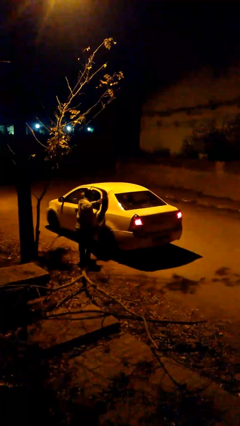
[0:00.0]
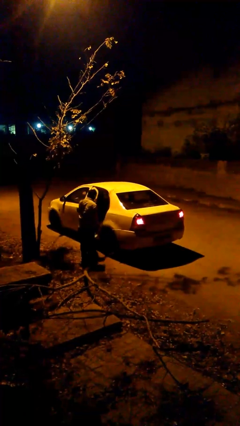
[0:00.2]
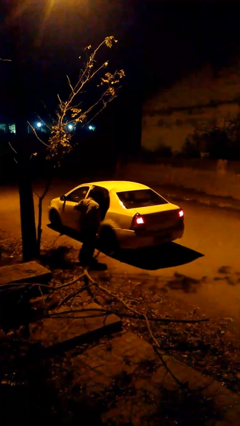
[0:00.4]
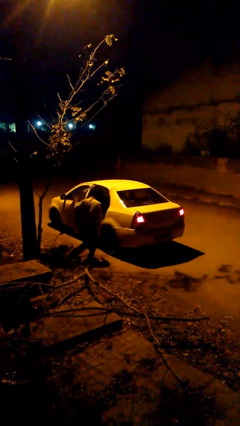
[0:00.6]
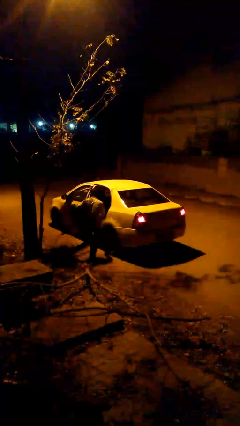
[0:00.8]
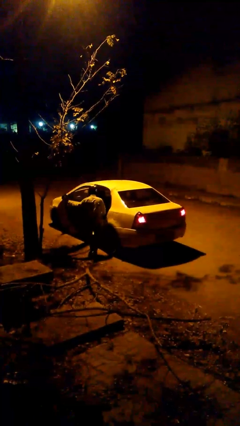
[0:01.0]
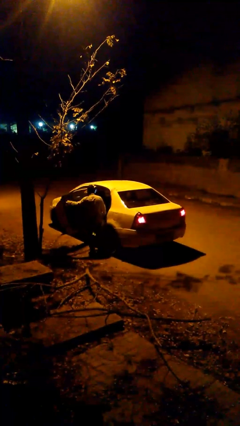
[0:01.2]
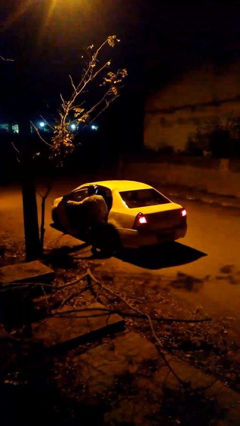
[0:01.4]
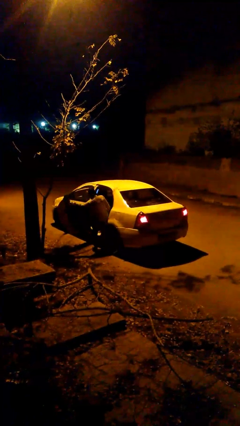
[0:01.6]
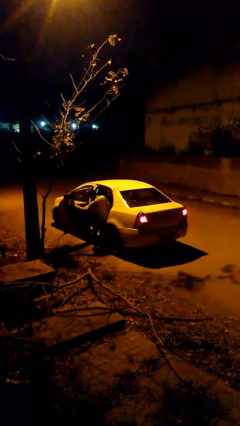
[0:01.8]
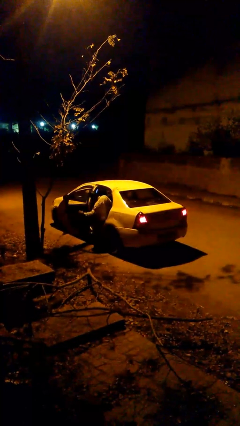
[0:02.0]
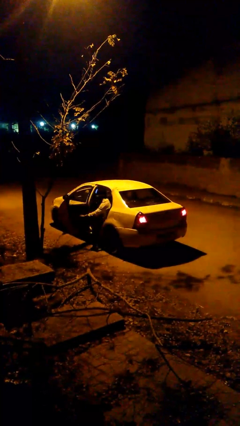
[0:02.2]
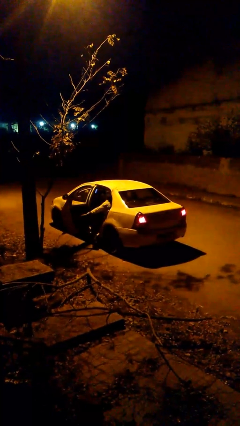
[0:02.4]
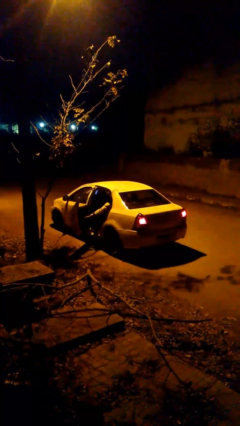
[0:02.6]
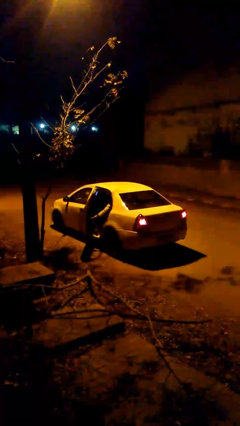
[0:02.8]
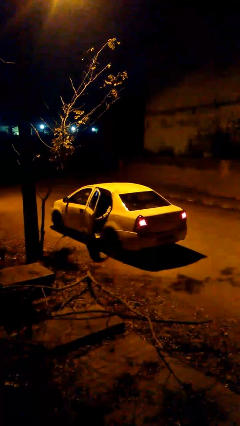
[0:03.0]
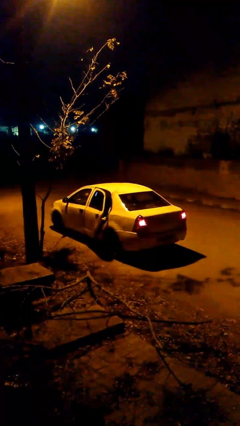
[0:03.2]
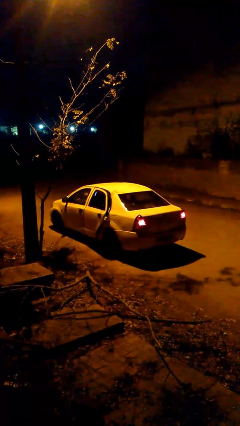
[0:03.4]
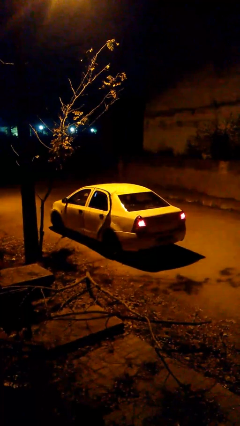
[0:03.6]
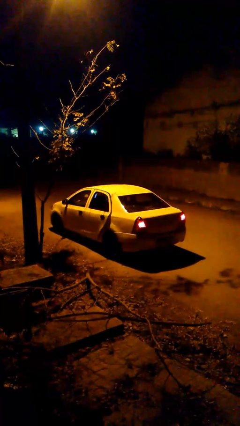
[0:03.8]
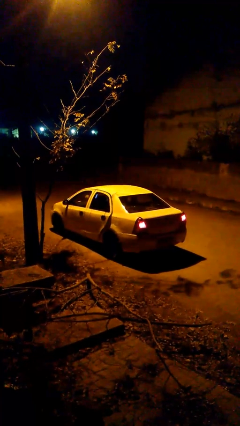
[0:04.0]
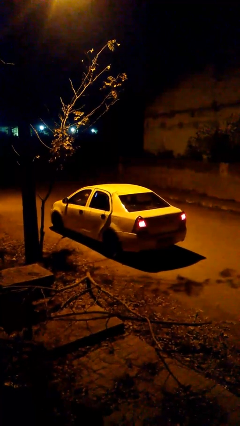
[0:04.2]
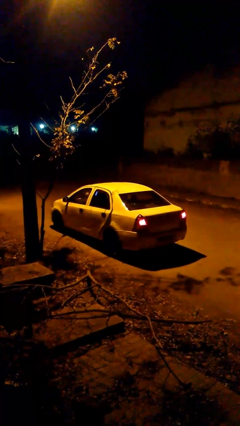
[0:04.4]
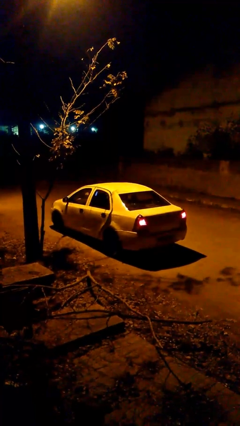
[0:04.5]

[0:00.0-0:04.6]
car picks up person

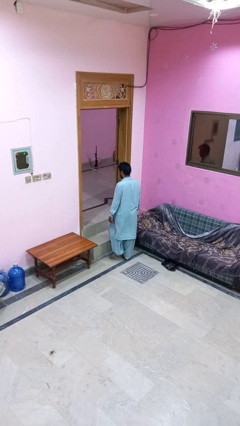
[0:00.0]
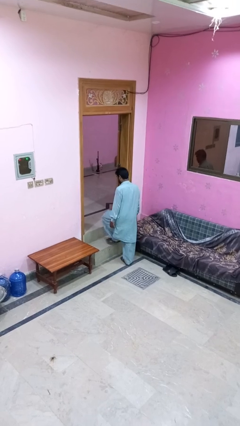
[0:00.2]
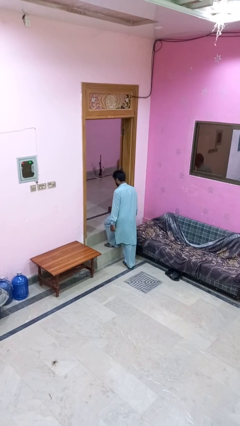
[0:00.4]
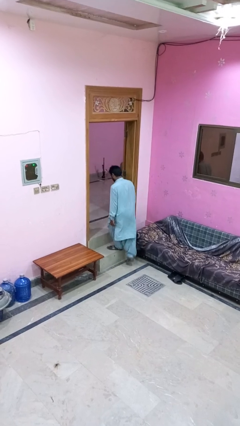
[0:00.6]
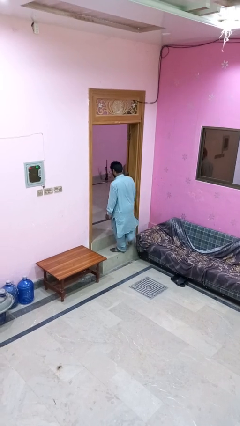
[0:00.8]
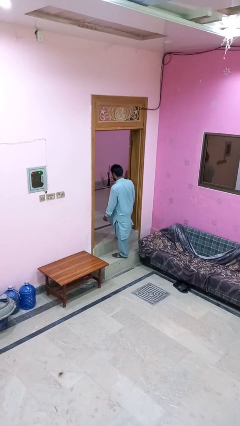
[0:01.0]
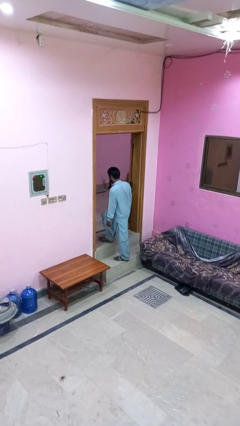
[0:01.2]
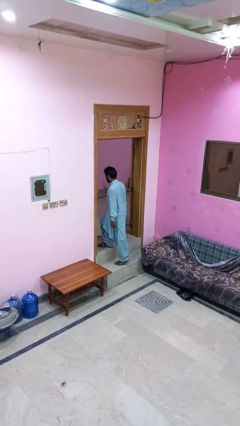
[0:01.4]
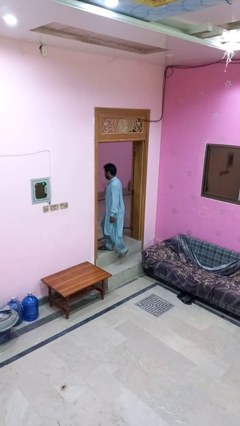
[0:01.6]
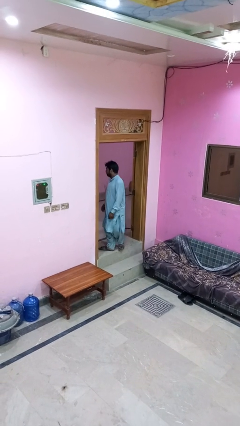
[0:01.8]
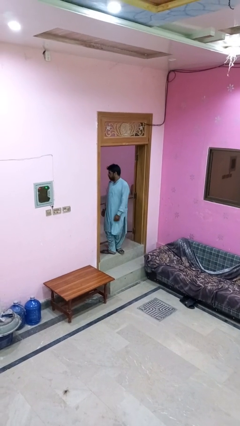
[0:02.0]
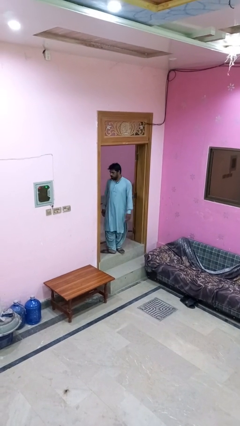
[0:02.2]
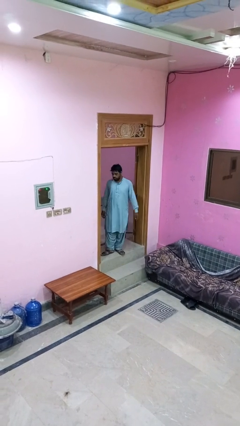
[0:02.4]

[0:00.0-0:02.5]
person climbs up stairs

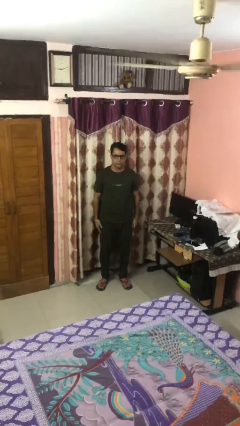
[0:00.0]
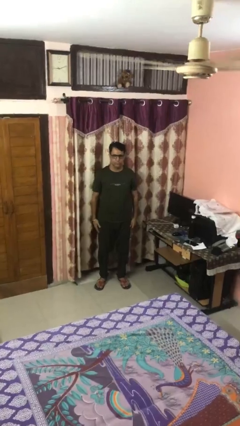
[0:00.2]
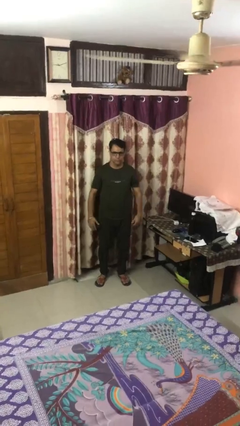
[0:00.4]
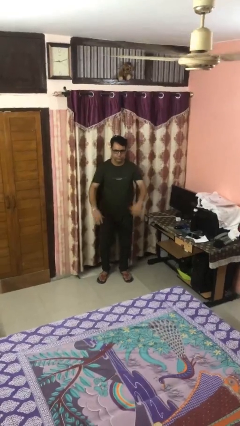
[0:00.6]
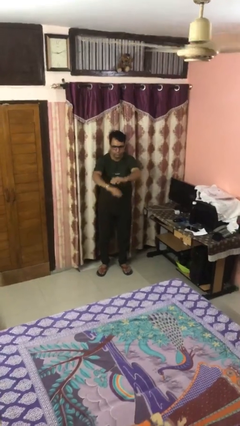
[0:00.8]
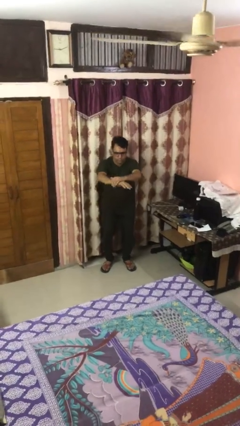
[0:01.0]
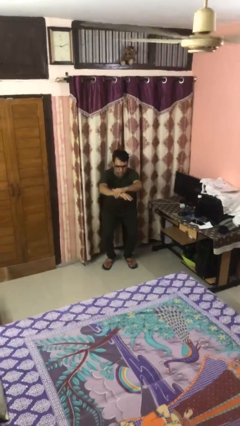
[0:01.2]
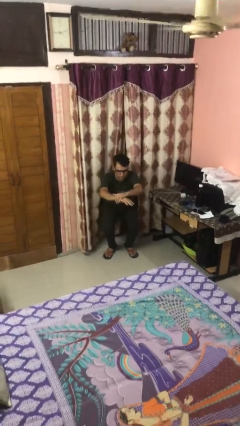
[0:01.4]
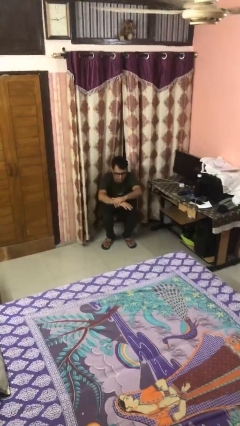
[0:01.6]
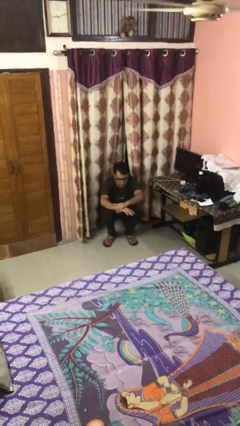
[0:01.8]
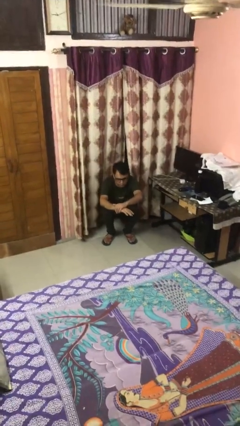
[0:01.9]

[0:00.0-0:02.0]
person squats

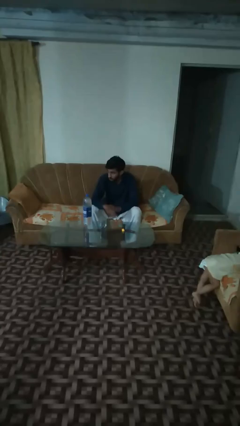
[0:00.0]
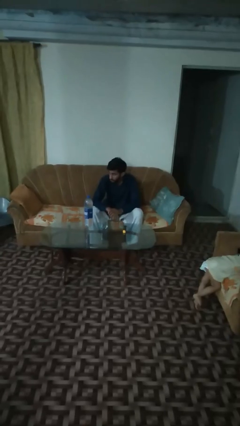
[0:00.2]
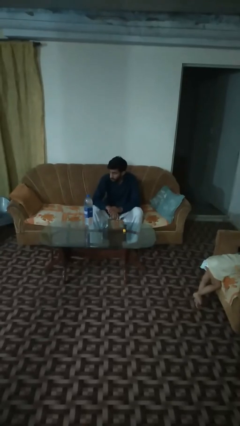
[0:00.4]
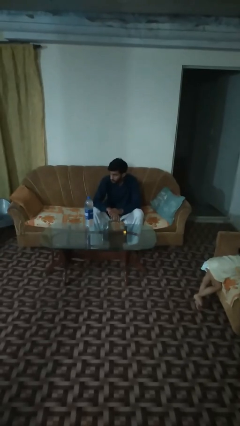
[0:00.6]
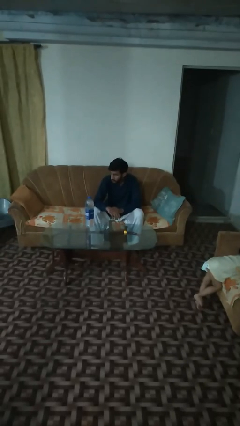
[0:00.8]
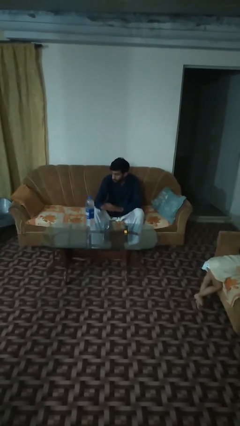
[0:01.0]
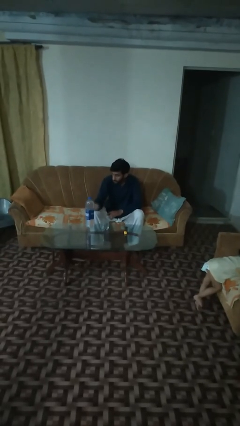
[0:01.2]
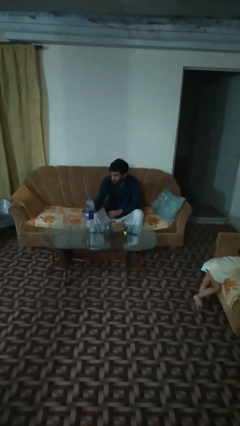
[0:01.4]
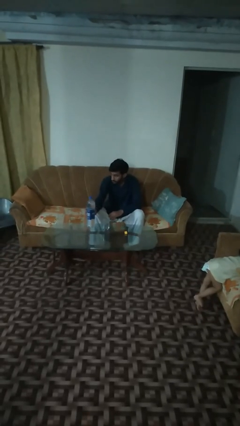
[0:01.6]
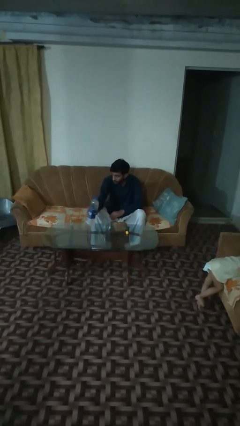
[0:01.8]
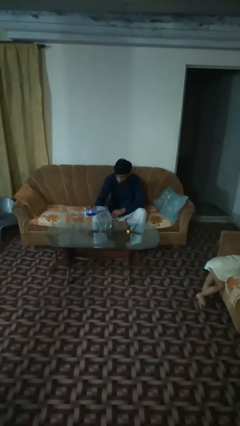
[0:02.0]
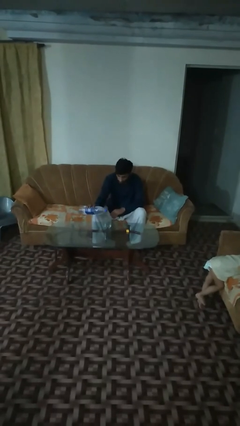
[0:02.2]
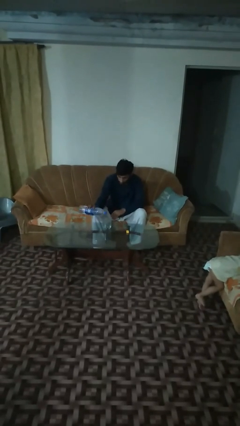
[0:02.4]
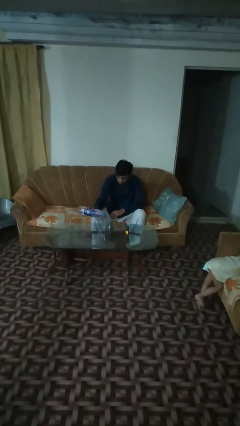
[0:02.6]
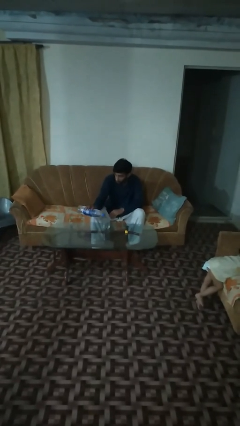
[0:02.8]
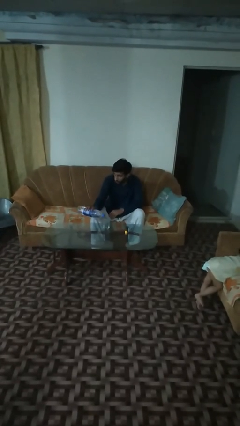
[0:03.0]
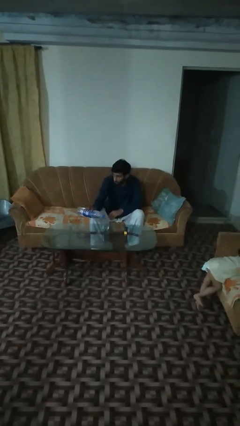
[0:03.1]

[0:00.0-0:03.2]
person pours liquid into cup

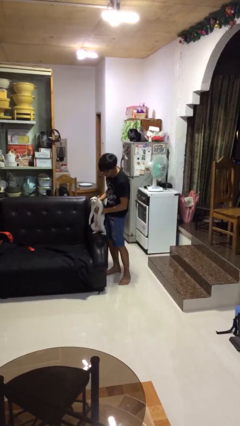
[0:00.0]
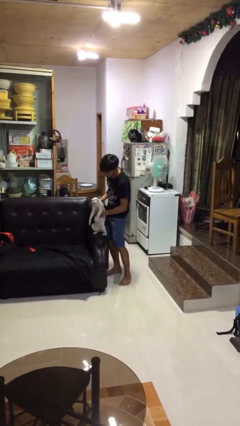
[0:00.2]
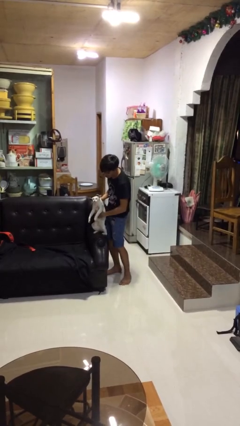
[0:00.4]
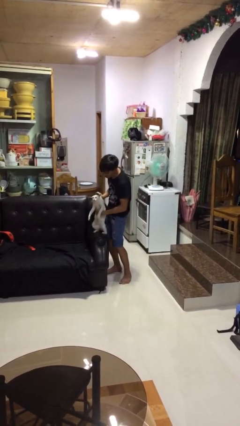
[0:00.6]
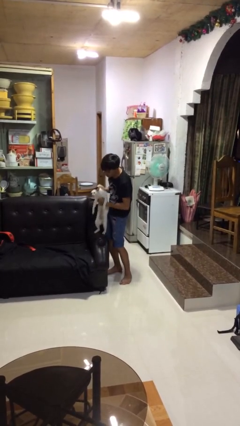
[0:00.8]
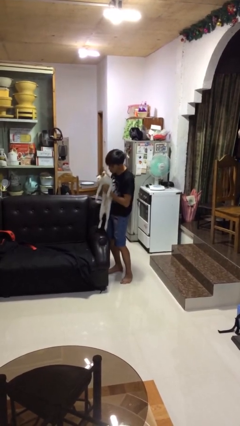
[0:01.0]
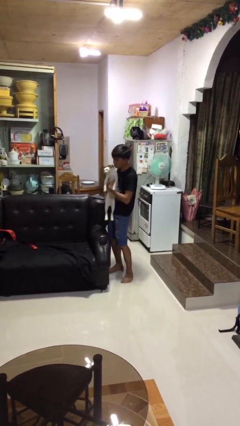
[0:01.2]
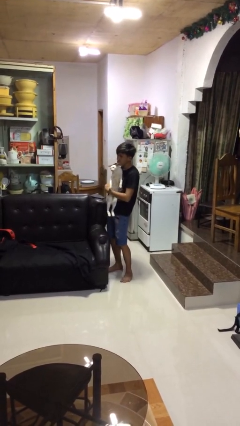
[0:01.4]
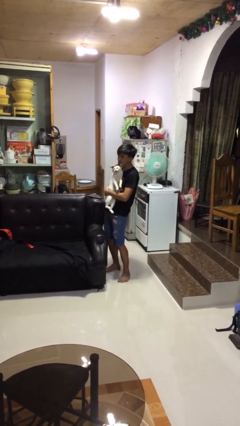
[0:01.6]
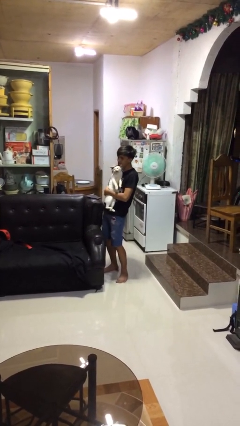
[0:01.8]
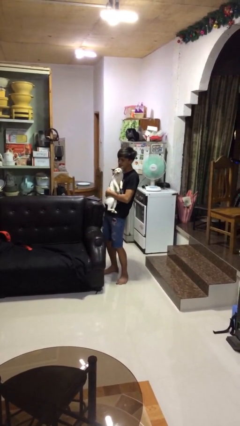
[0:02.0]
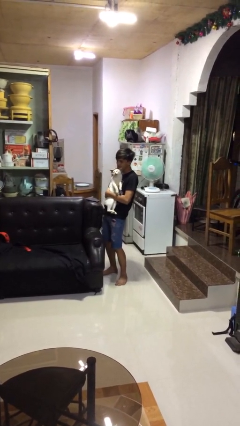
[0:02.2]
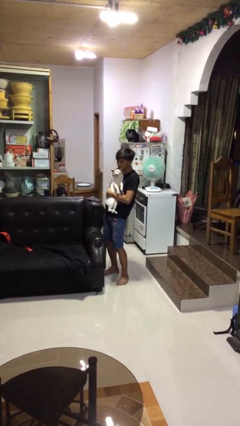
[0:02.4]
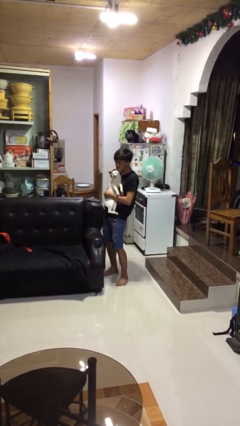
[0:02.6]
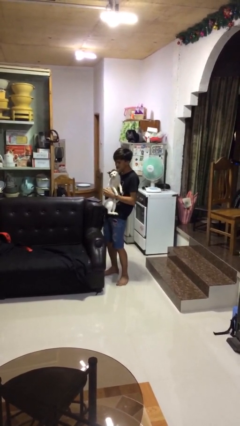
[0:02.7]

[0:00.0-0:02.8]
person hugs cat

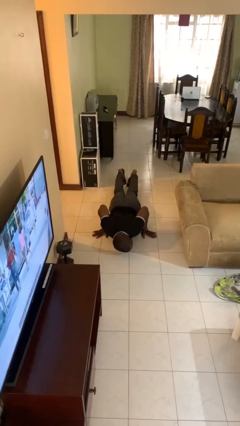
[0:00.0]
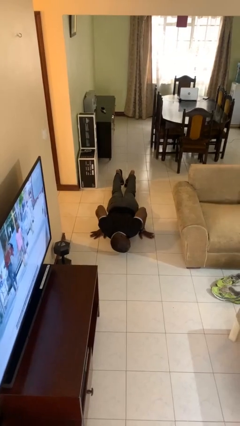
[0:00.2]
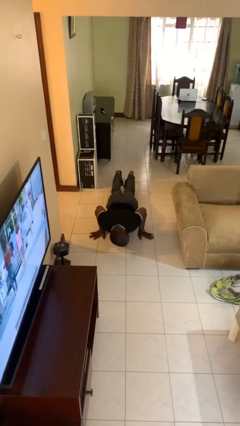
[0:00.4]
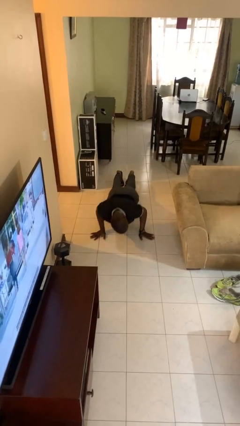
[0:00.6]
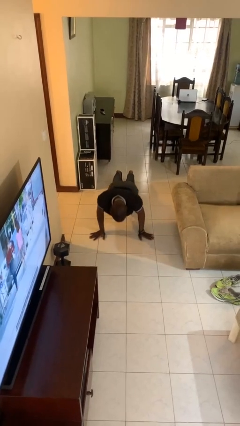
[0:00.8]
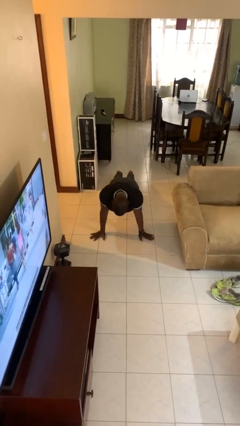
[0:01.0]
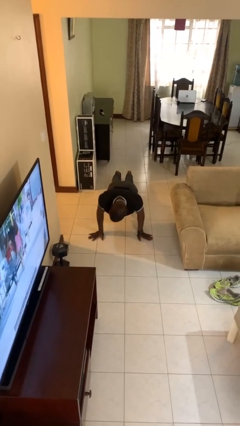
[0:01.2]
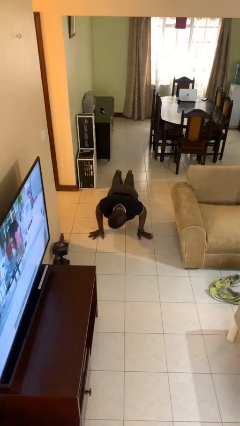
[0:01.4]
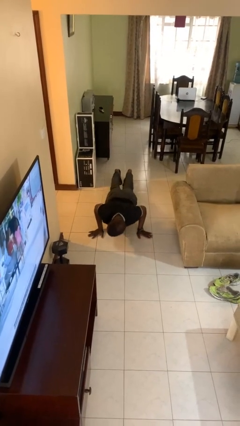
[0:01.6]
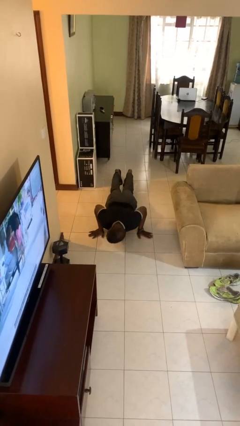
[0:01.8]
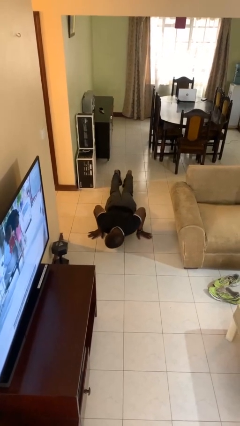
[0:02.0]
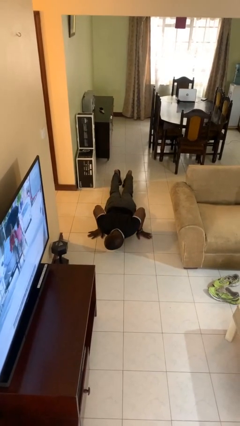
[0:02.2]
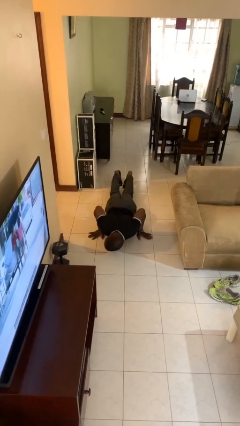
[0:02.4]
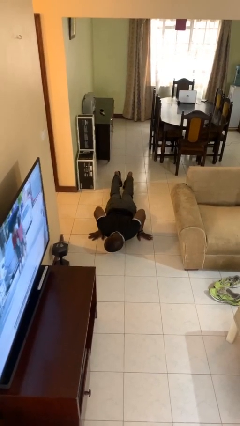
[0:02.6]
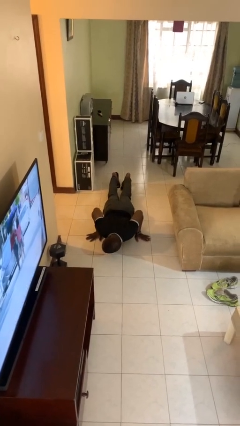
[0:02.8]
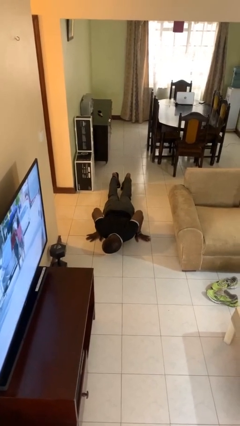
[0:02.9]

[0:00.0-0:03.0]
person exercises with pushup
